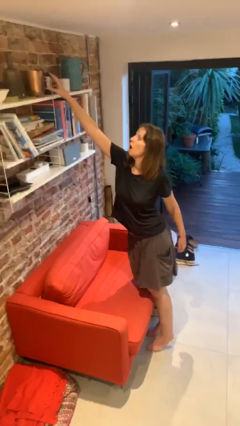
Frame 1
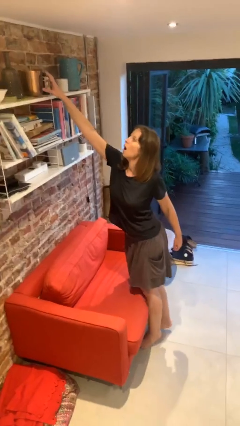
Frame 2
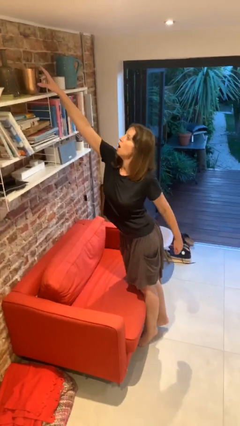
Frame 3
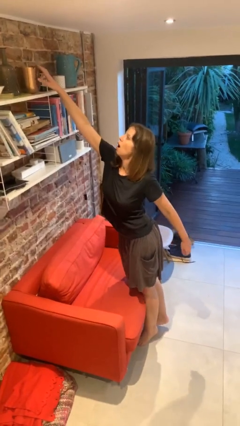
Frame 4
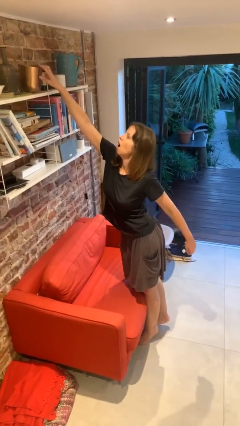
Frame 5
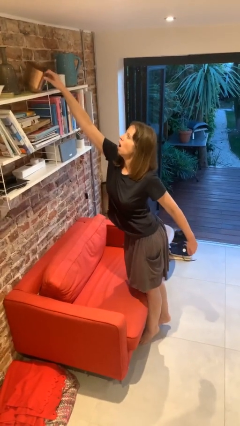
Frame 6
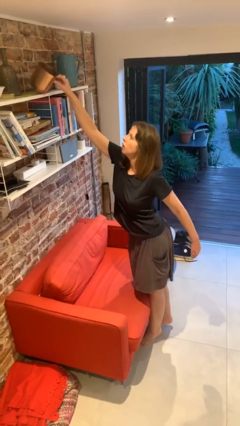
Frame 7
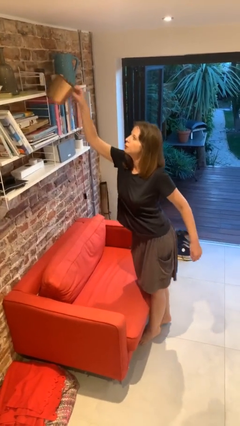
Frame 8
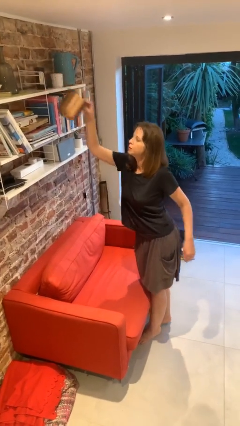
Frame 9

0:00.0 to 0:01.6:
person picks up object from shelf

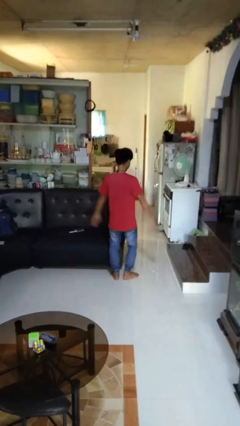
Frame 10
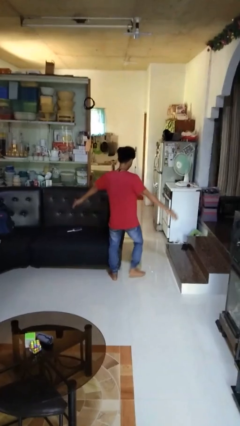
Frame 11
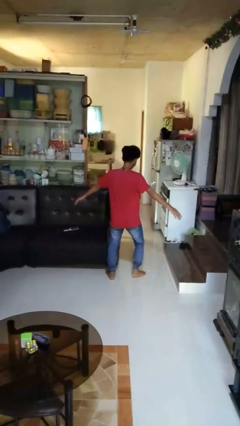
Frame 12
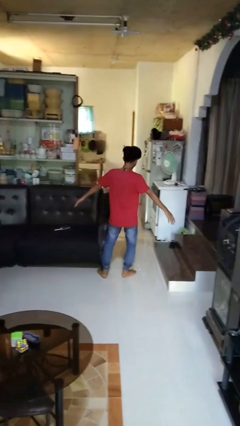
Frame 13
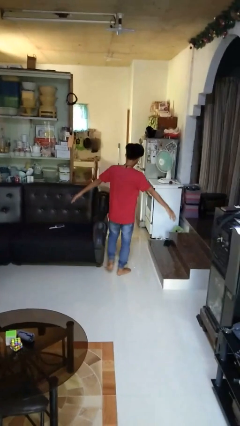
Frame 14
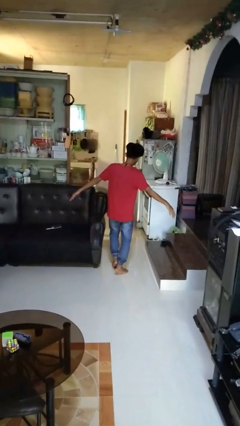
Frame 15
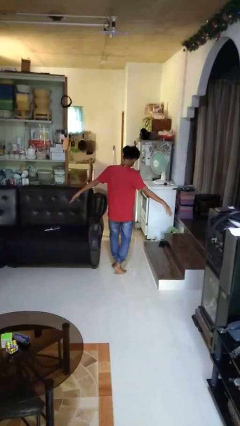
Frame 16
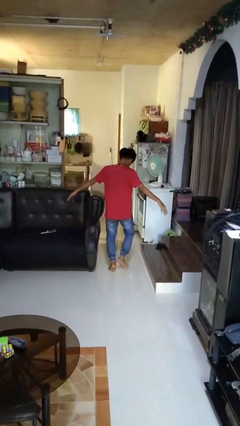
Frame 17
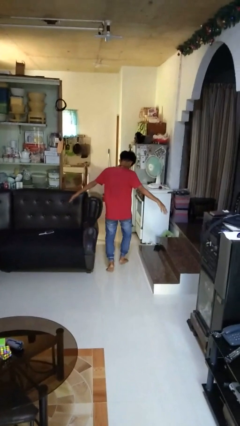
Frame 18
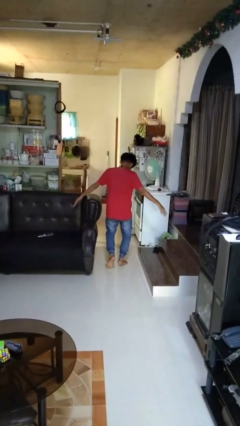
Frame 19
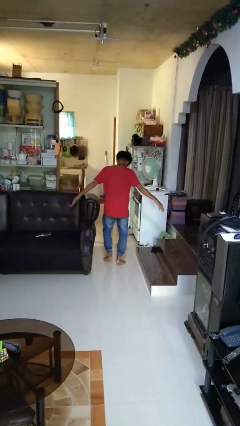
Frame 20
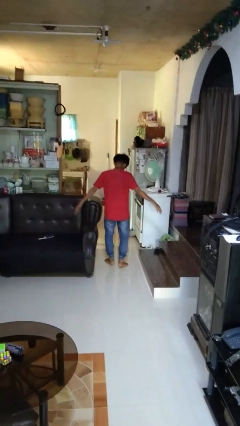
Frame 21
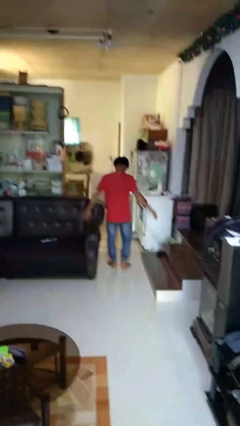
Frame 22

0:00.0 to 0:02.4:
person walks tiptoe

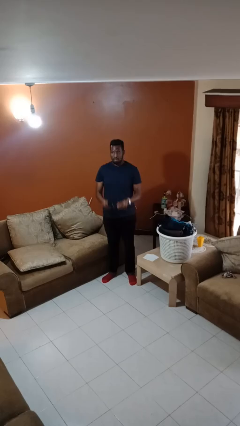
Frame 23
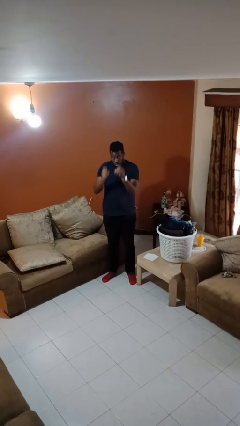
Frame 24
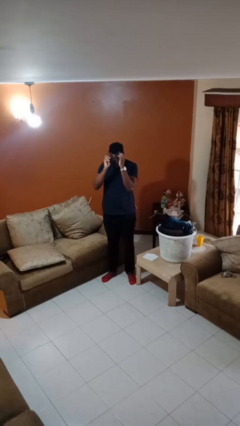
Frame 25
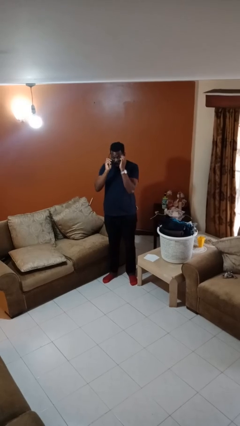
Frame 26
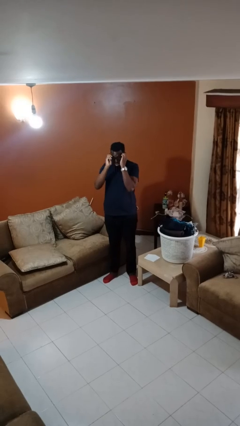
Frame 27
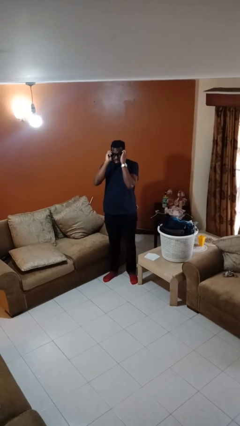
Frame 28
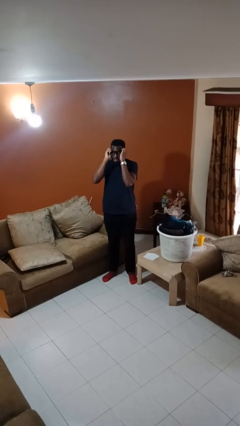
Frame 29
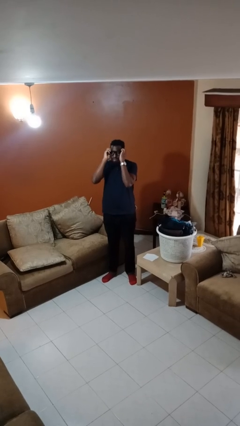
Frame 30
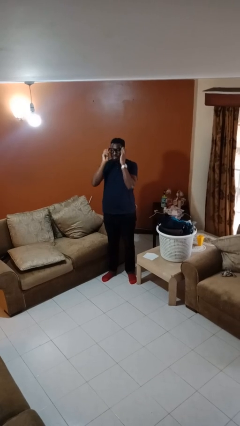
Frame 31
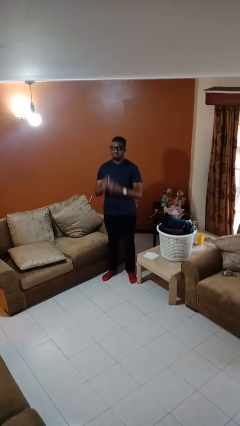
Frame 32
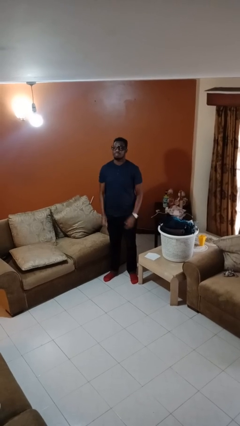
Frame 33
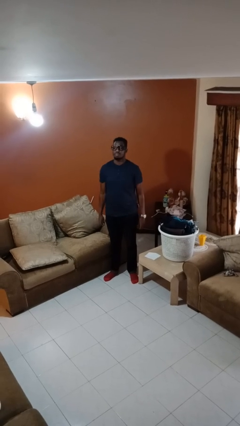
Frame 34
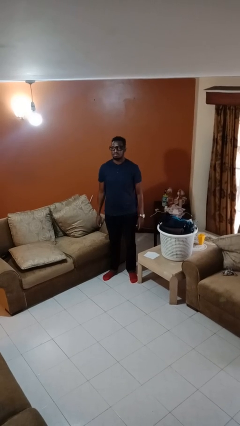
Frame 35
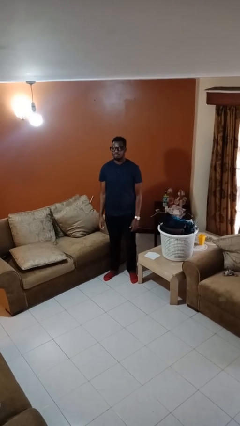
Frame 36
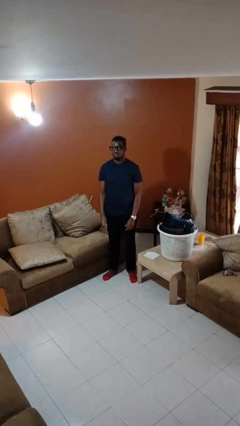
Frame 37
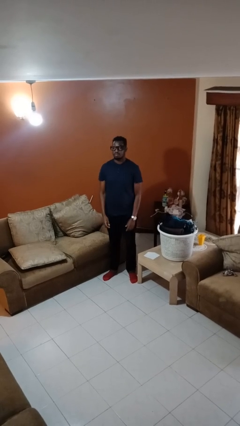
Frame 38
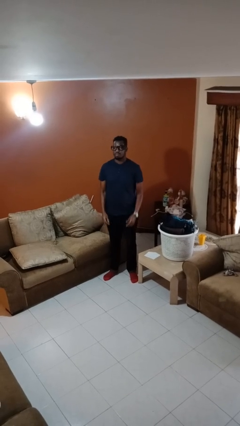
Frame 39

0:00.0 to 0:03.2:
person puts on glasses

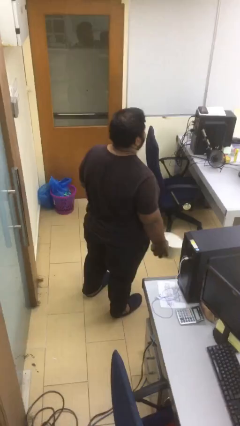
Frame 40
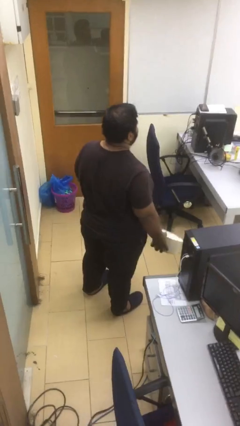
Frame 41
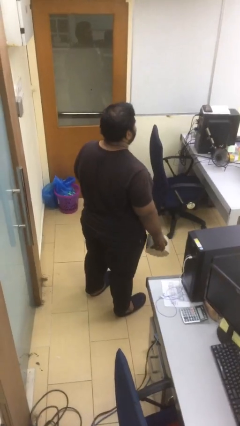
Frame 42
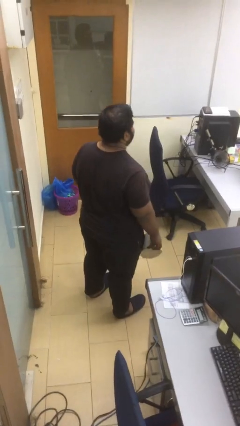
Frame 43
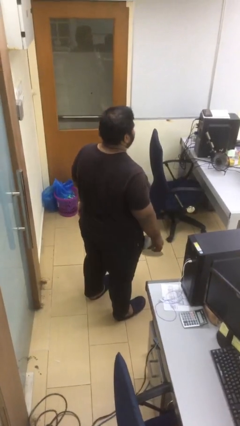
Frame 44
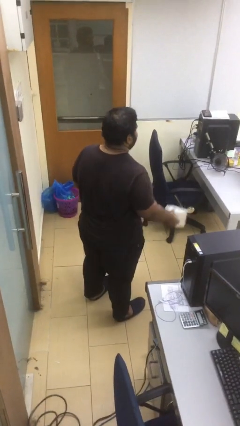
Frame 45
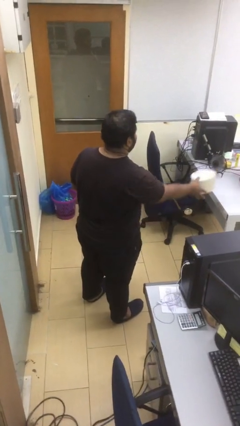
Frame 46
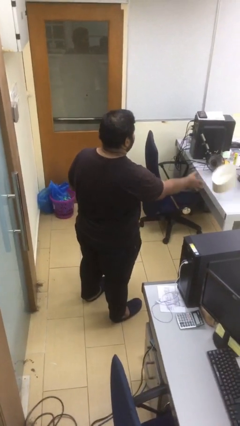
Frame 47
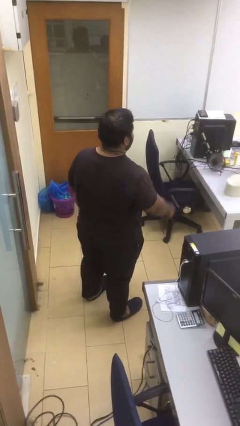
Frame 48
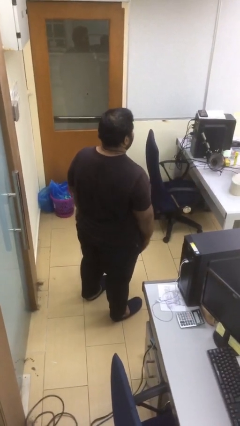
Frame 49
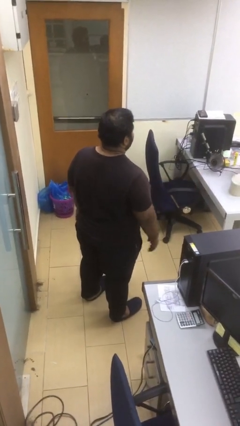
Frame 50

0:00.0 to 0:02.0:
person throws object on table

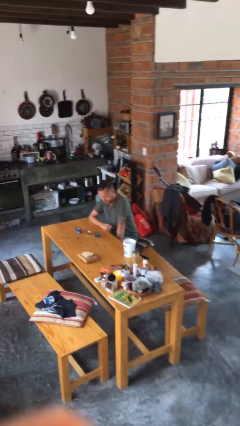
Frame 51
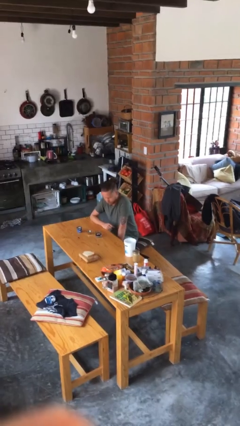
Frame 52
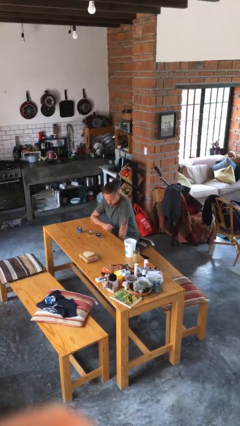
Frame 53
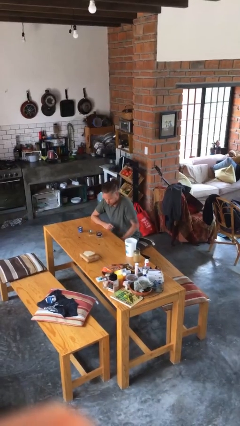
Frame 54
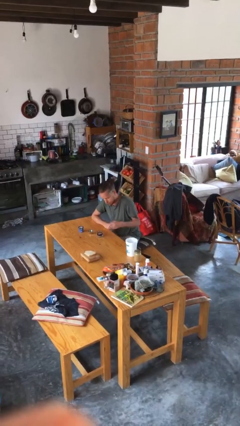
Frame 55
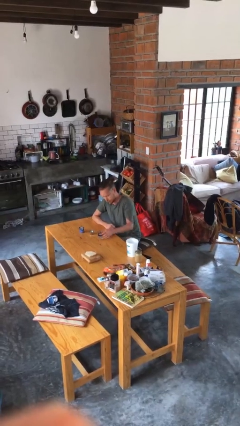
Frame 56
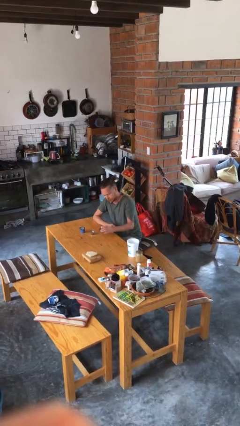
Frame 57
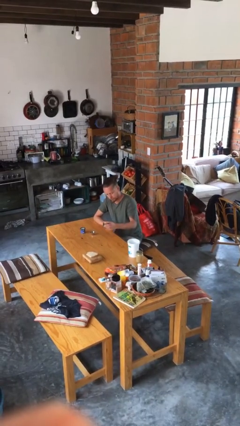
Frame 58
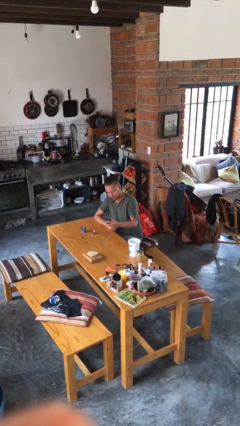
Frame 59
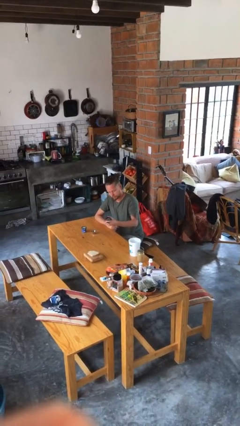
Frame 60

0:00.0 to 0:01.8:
person picks up object from table

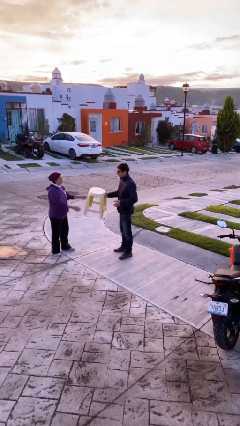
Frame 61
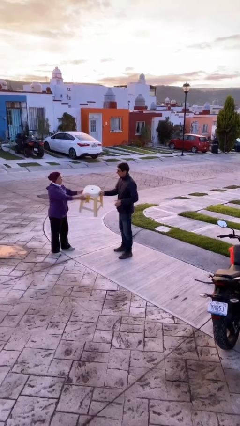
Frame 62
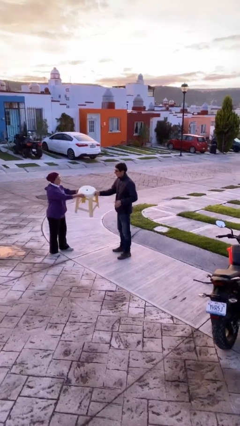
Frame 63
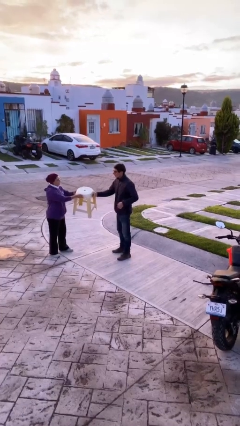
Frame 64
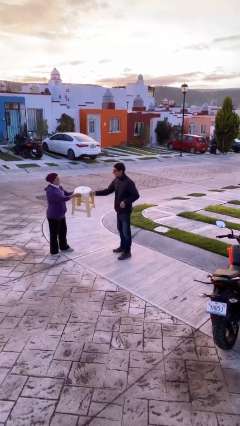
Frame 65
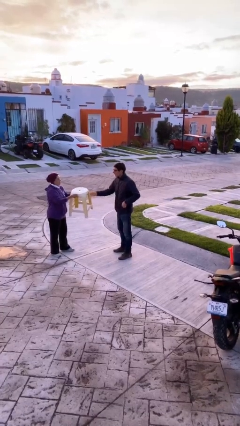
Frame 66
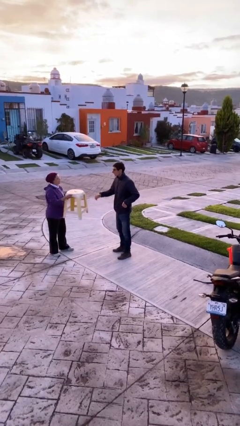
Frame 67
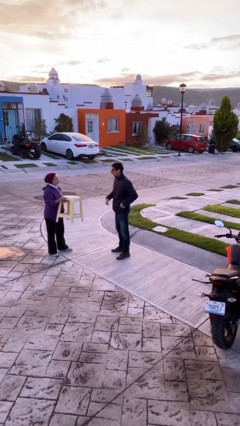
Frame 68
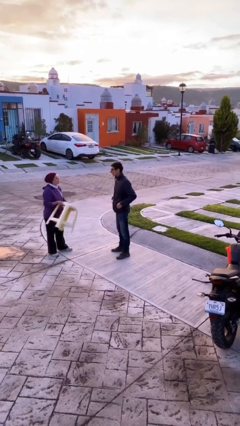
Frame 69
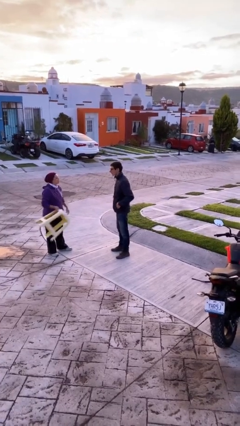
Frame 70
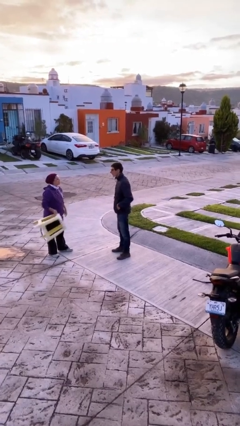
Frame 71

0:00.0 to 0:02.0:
person transfers object to person

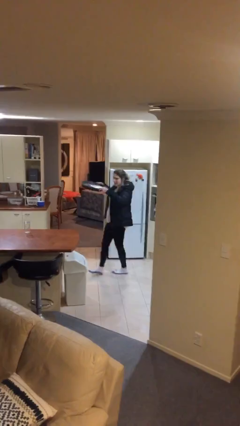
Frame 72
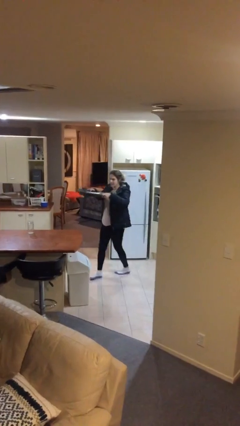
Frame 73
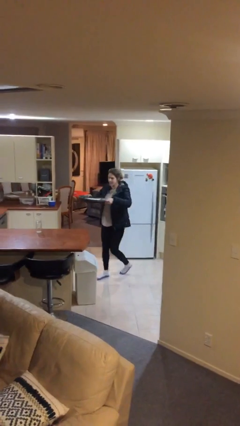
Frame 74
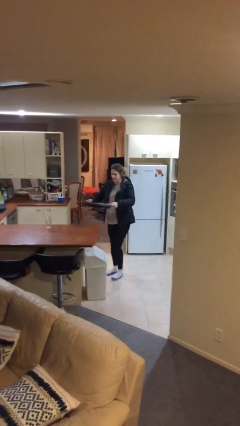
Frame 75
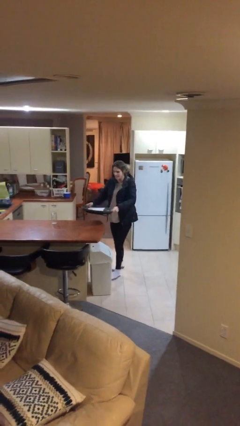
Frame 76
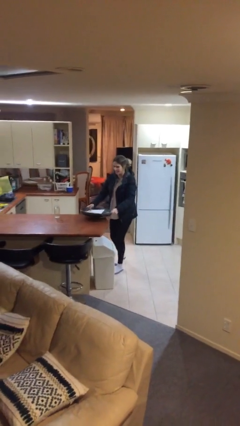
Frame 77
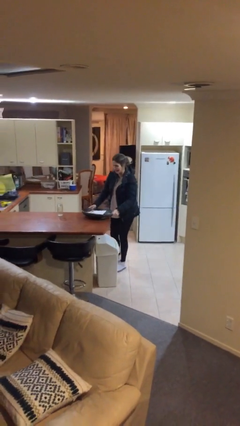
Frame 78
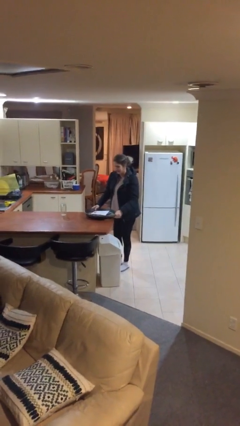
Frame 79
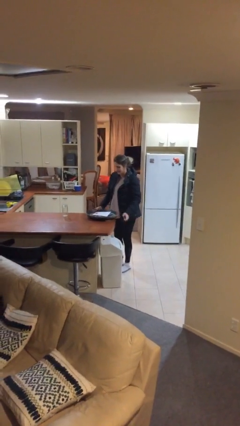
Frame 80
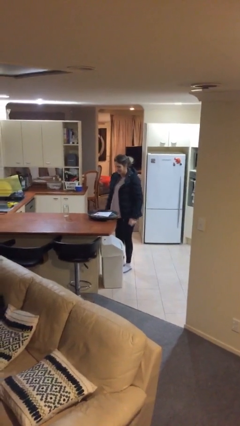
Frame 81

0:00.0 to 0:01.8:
person puts down object on table

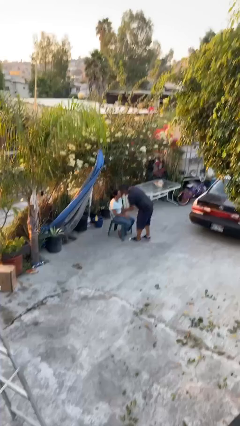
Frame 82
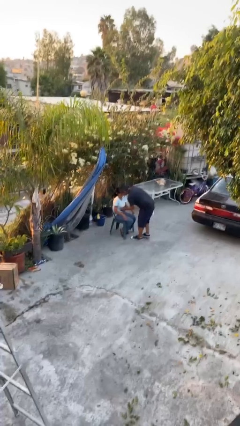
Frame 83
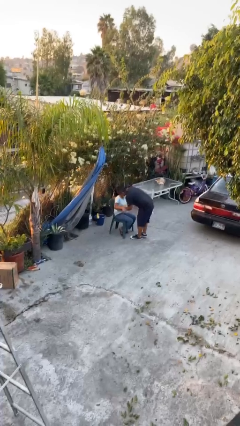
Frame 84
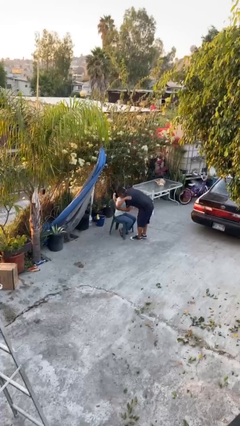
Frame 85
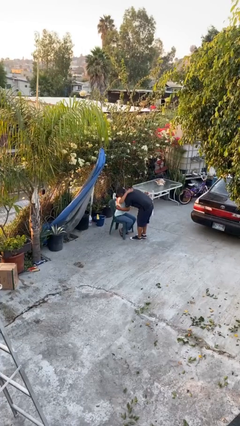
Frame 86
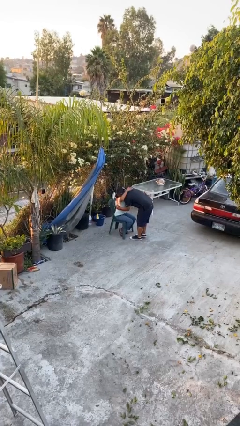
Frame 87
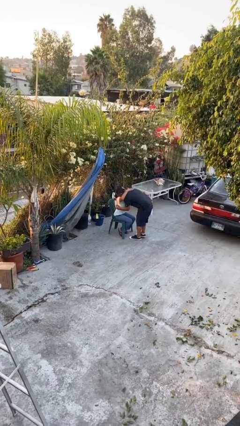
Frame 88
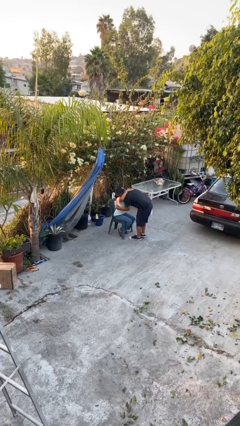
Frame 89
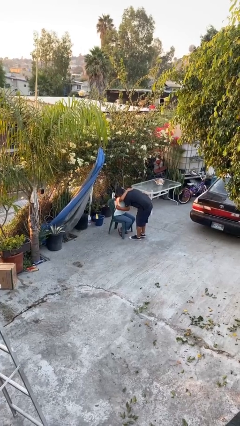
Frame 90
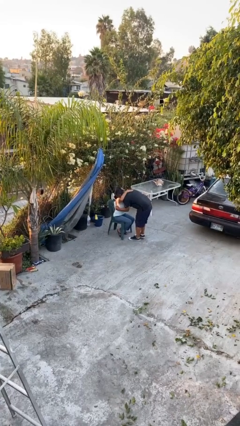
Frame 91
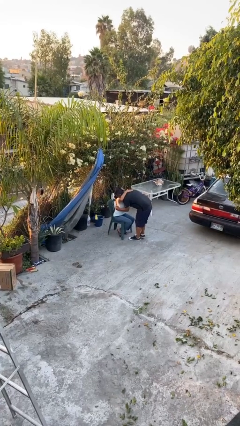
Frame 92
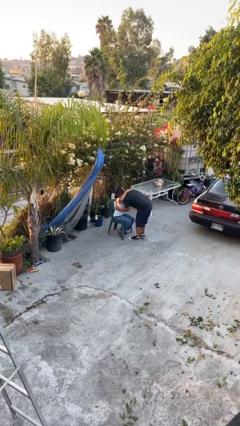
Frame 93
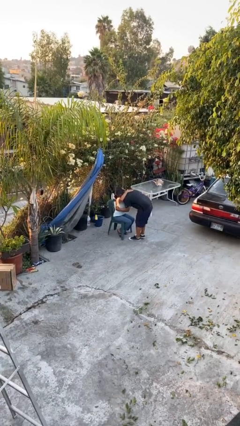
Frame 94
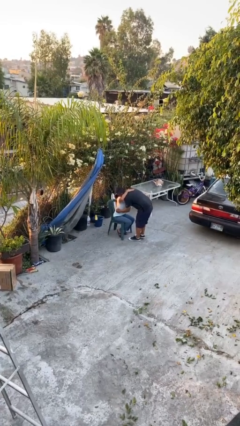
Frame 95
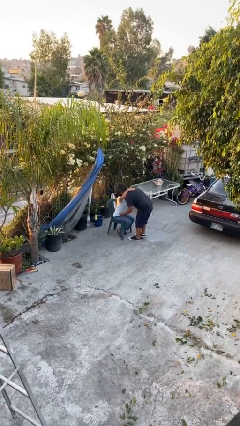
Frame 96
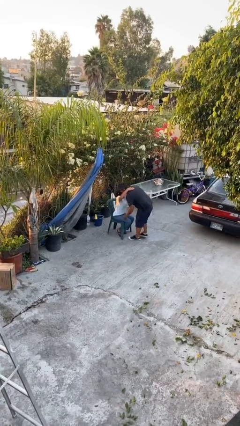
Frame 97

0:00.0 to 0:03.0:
person embraces person
